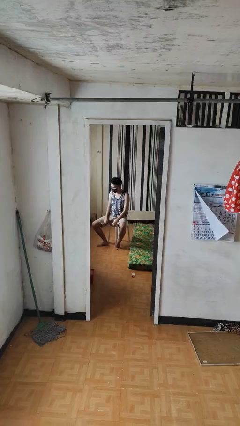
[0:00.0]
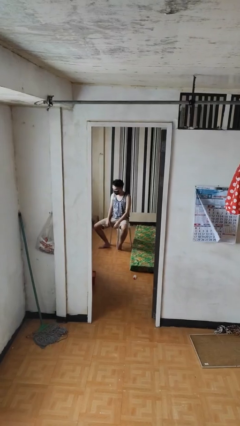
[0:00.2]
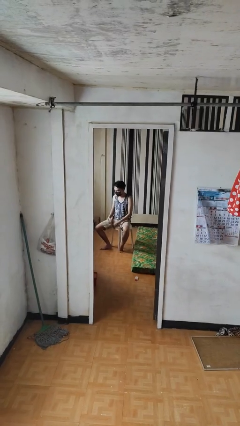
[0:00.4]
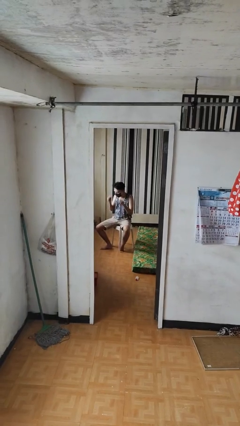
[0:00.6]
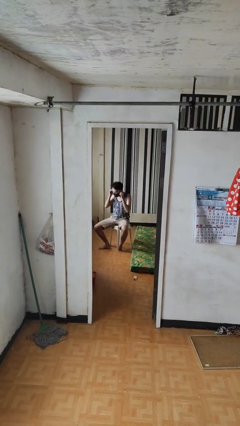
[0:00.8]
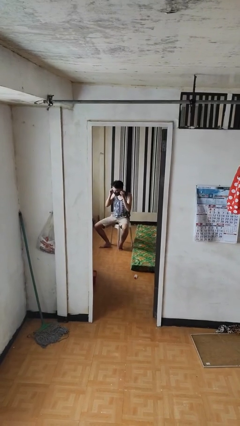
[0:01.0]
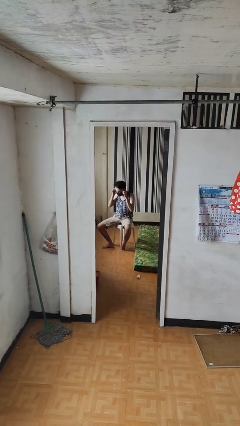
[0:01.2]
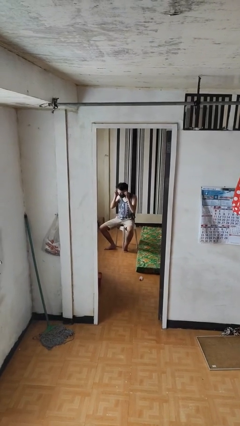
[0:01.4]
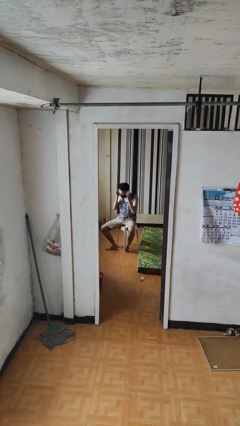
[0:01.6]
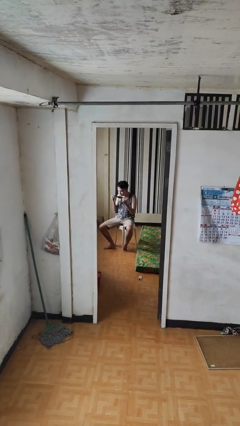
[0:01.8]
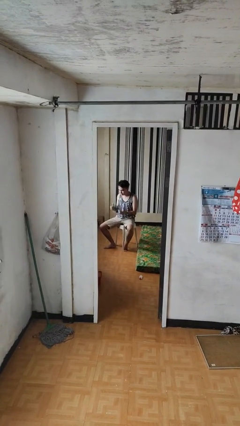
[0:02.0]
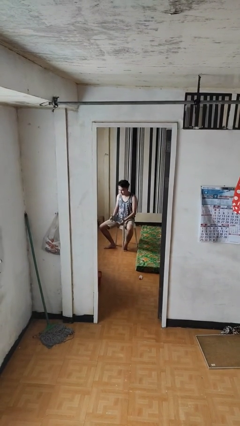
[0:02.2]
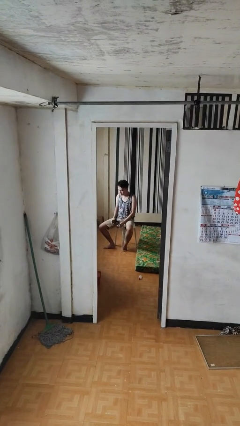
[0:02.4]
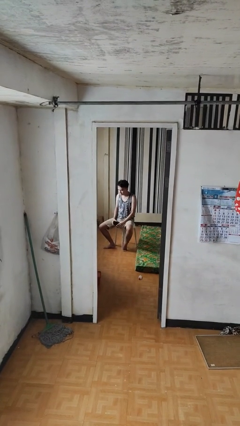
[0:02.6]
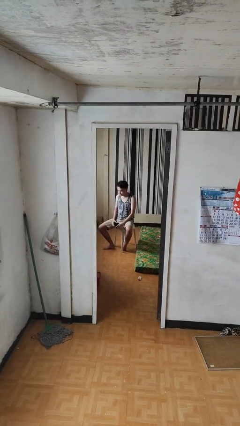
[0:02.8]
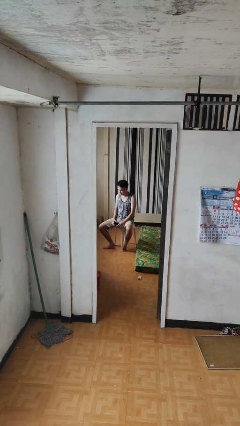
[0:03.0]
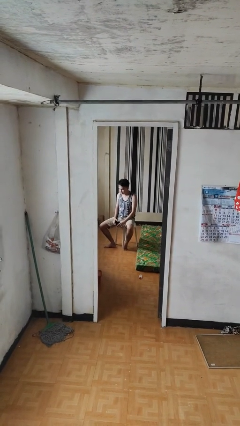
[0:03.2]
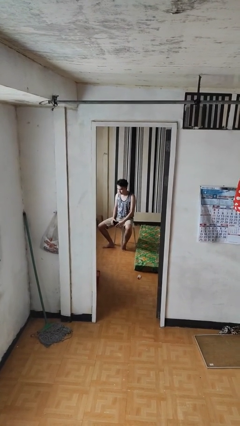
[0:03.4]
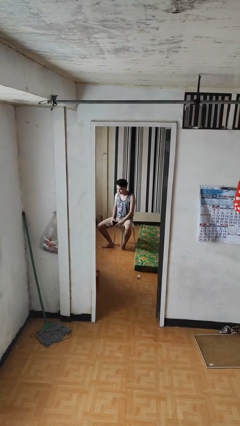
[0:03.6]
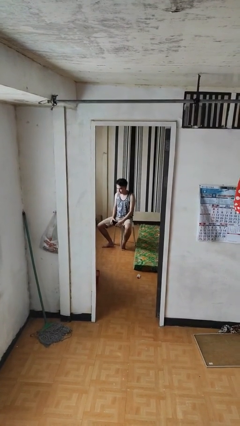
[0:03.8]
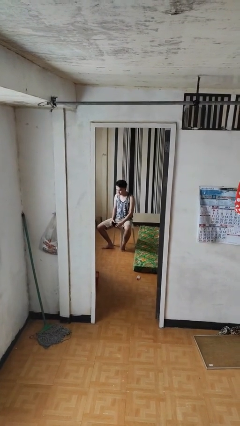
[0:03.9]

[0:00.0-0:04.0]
person takes off facemask

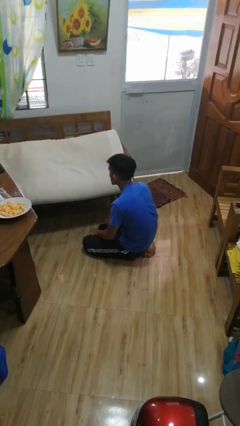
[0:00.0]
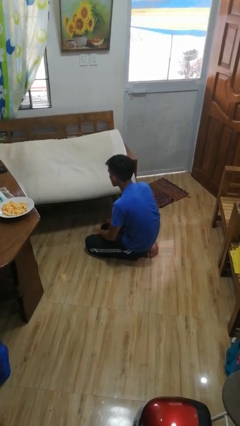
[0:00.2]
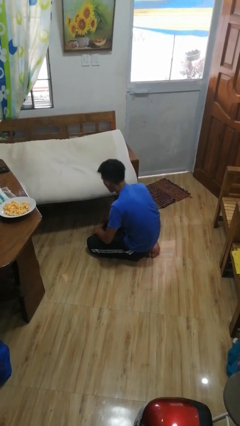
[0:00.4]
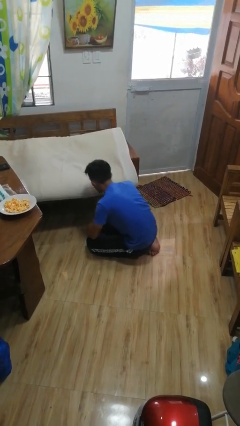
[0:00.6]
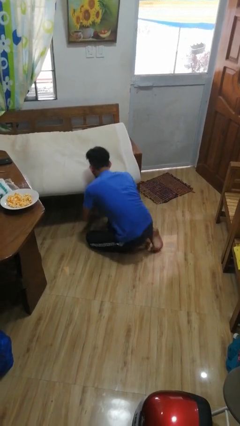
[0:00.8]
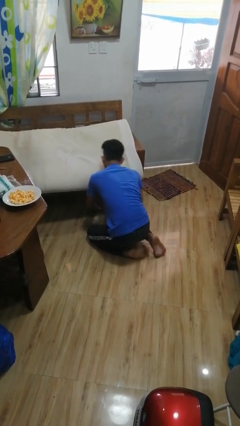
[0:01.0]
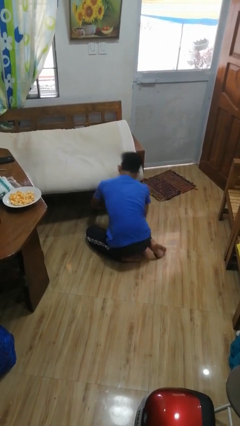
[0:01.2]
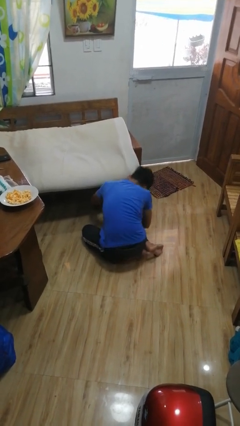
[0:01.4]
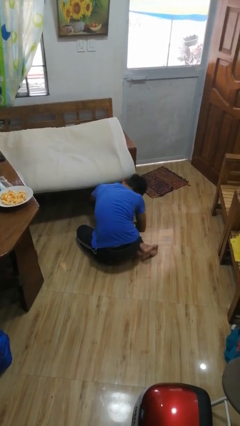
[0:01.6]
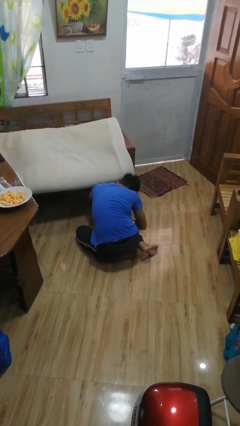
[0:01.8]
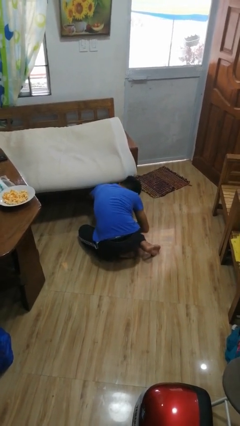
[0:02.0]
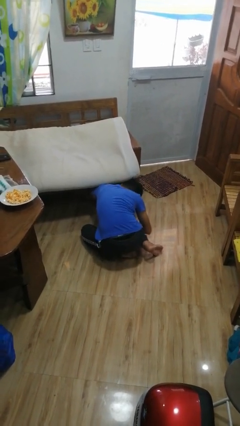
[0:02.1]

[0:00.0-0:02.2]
person searches under couch

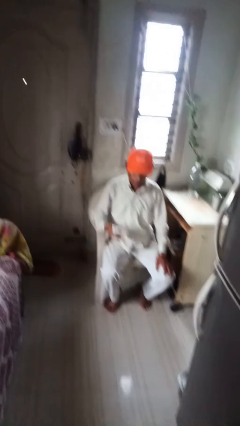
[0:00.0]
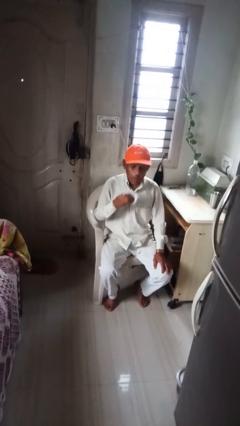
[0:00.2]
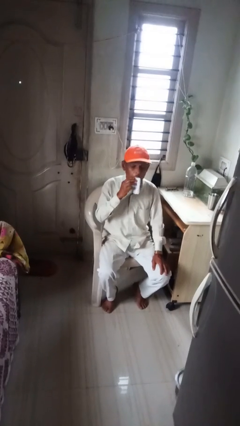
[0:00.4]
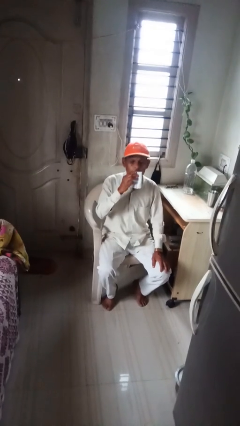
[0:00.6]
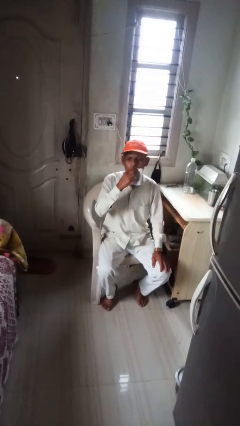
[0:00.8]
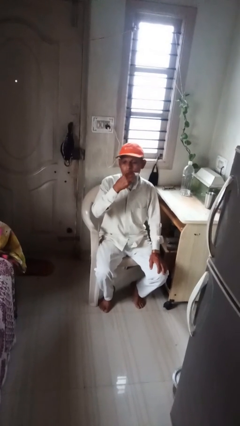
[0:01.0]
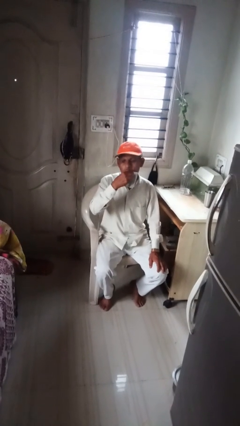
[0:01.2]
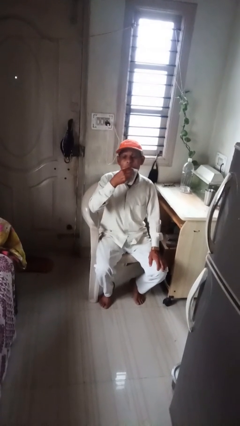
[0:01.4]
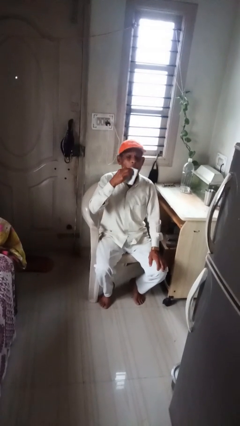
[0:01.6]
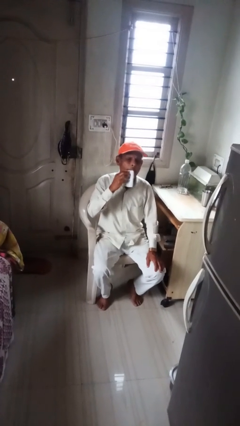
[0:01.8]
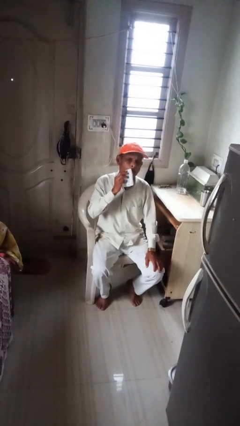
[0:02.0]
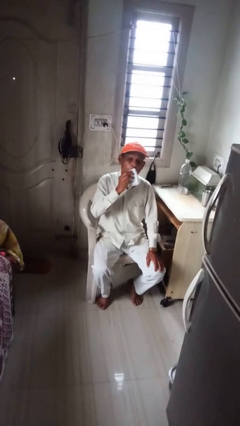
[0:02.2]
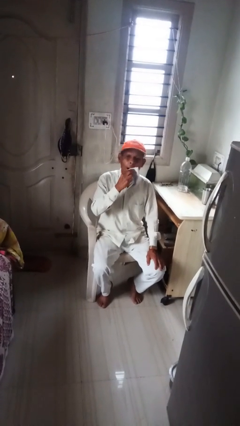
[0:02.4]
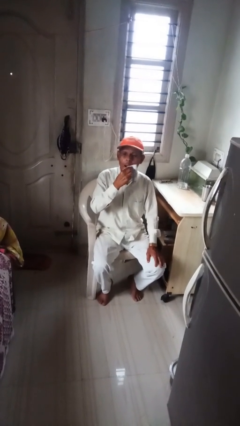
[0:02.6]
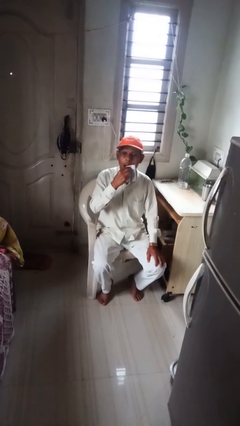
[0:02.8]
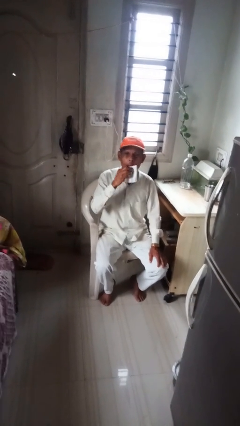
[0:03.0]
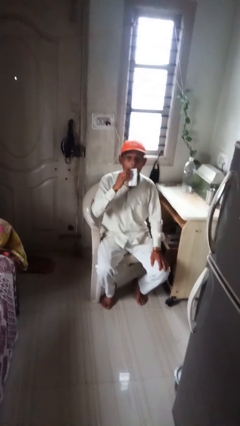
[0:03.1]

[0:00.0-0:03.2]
person wipes mouth with napkin

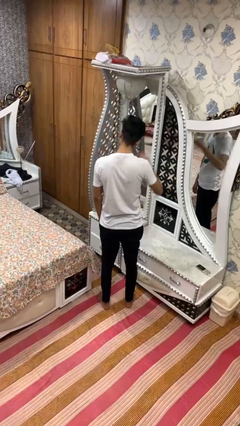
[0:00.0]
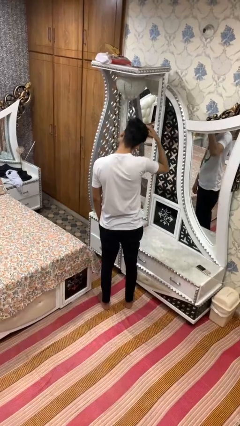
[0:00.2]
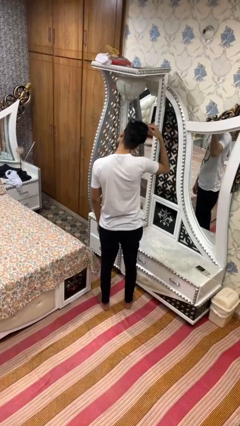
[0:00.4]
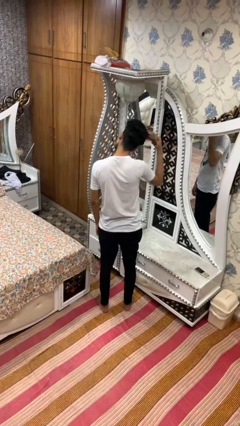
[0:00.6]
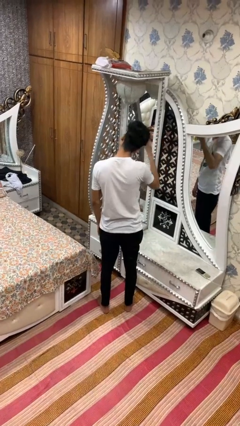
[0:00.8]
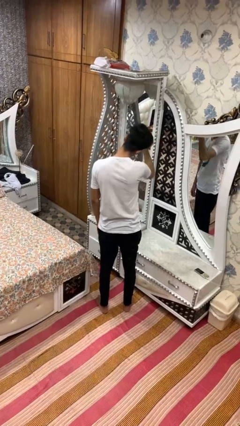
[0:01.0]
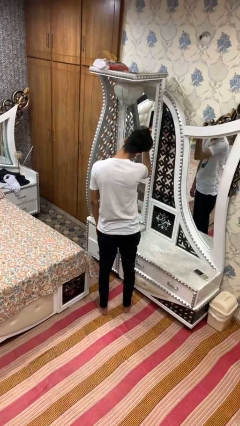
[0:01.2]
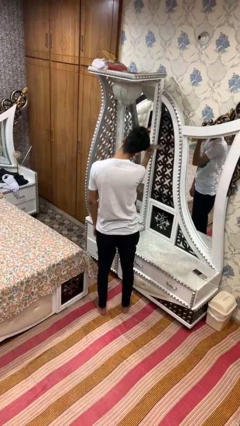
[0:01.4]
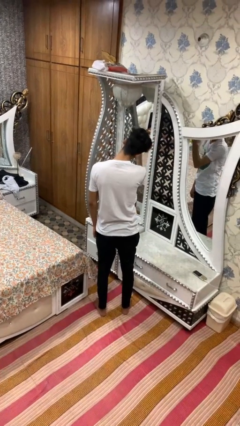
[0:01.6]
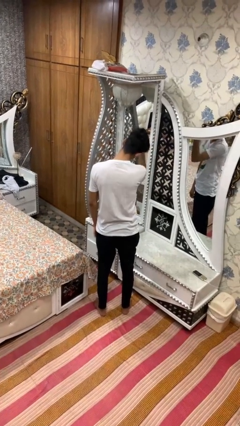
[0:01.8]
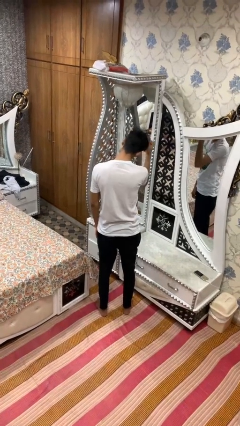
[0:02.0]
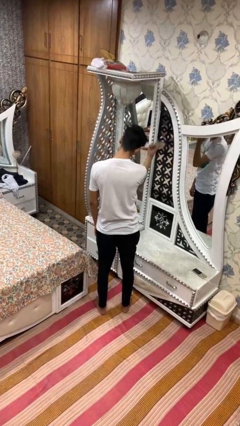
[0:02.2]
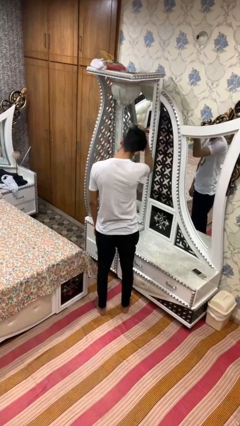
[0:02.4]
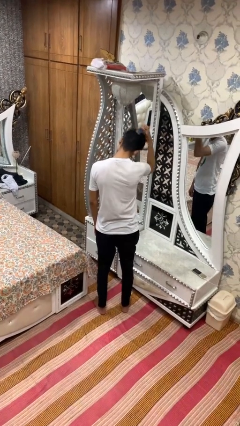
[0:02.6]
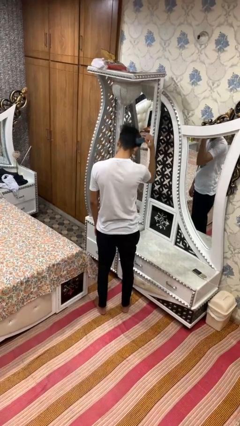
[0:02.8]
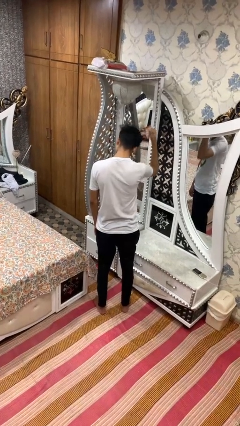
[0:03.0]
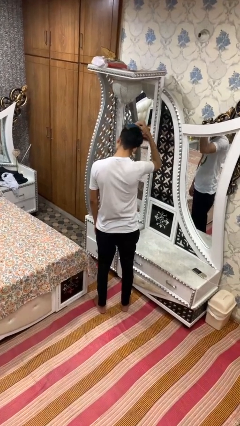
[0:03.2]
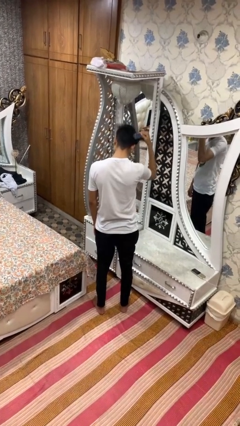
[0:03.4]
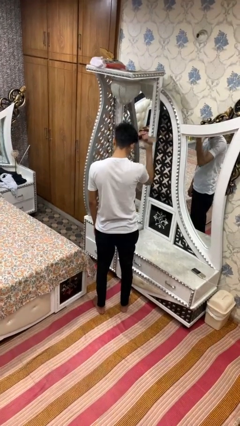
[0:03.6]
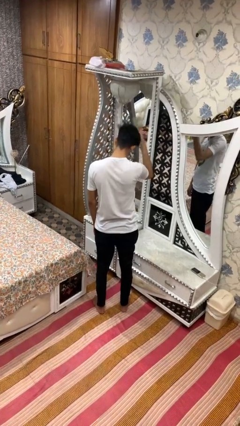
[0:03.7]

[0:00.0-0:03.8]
person brushes hair

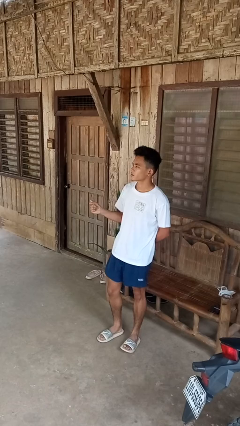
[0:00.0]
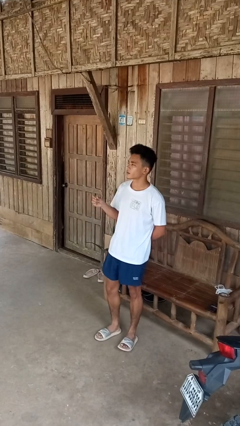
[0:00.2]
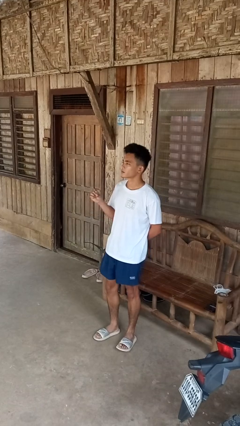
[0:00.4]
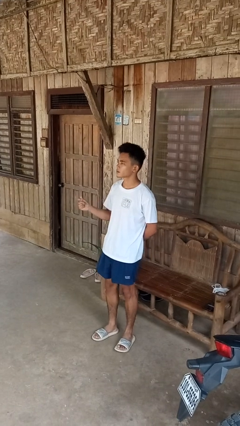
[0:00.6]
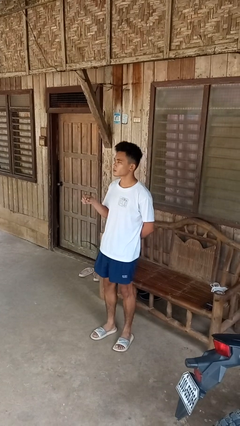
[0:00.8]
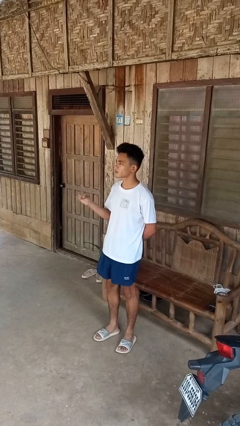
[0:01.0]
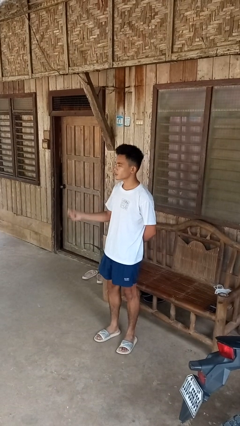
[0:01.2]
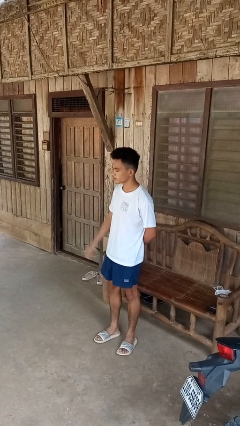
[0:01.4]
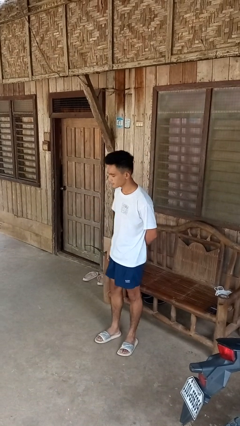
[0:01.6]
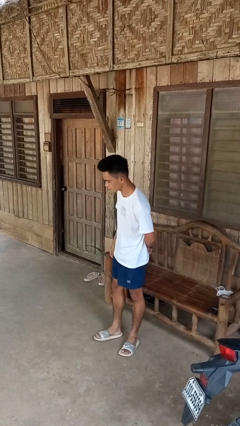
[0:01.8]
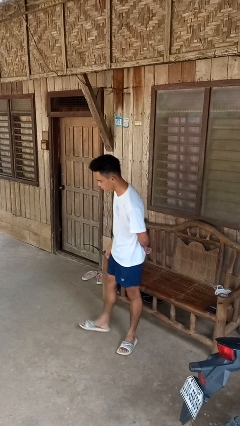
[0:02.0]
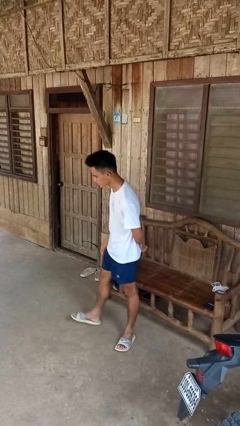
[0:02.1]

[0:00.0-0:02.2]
person snaps fingers

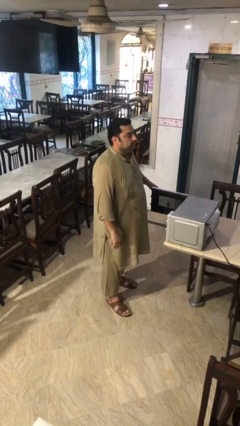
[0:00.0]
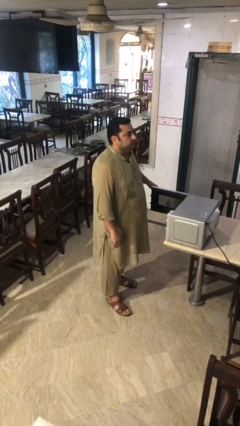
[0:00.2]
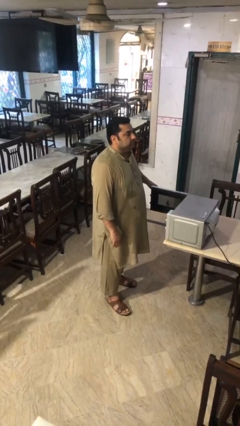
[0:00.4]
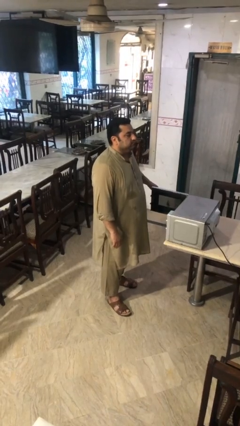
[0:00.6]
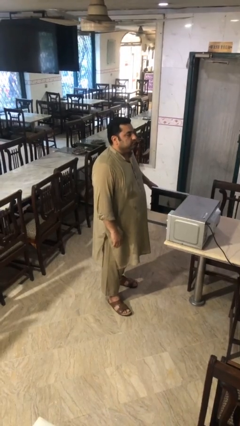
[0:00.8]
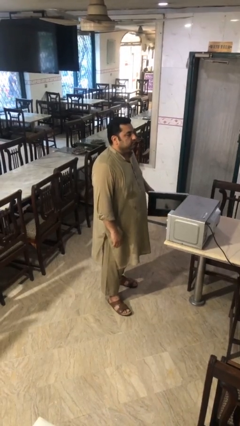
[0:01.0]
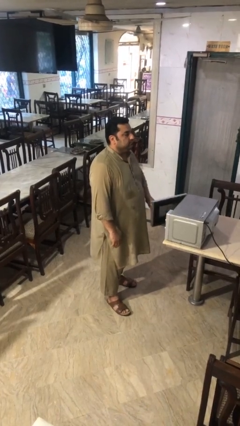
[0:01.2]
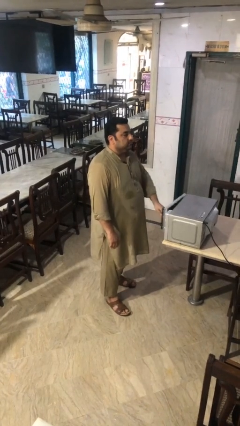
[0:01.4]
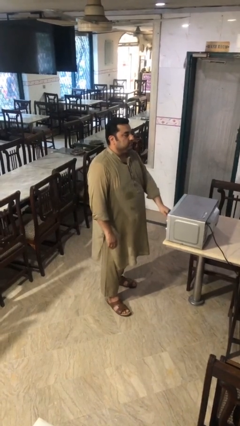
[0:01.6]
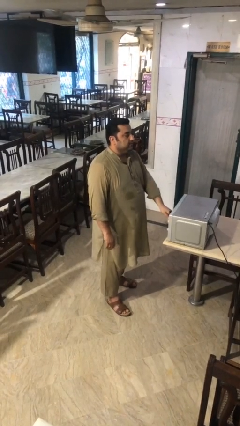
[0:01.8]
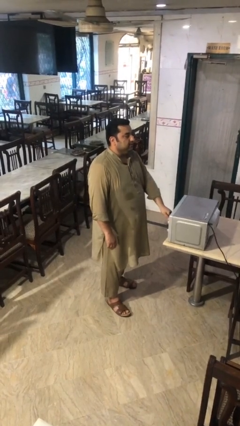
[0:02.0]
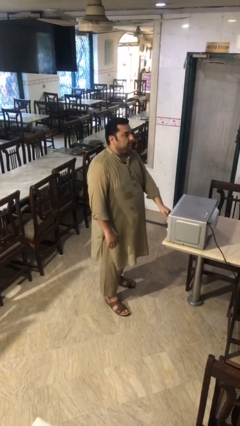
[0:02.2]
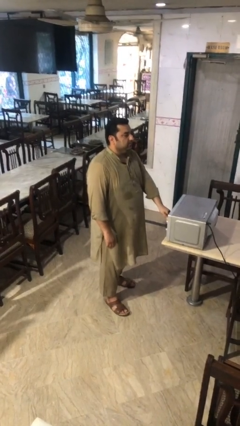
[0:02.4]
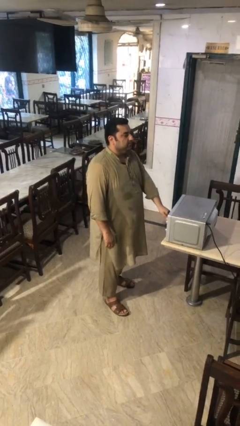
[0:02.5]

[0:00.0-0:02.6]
person closes microwave
